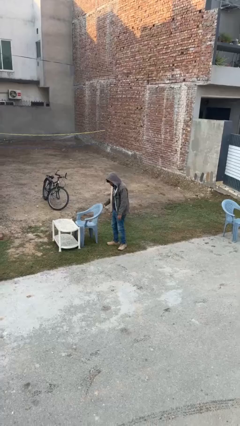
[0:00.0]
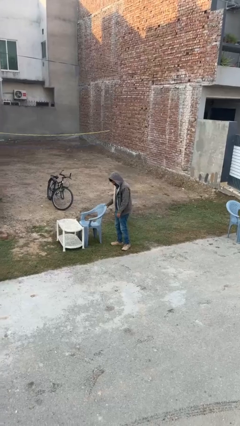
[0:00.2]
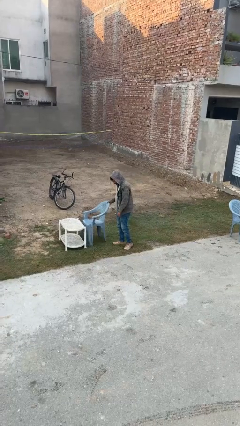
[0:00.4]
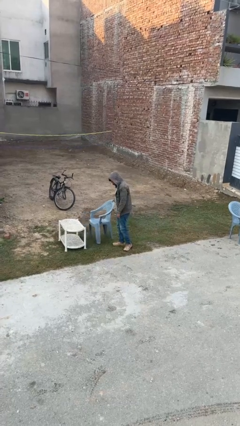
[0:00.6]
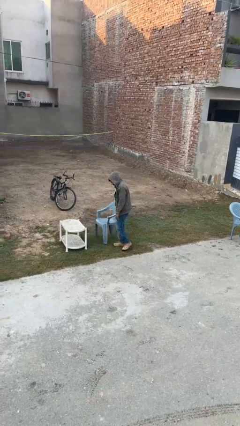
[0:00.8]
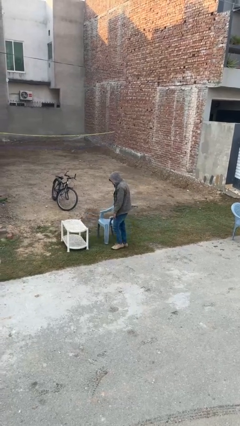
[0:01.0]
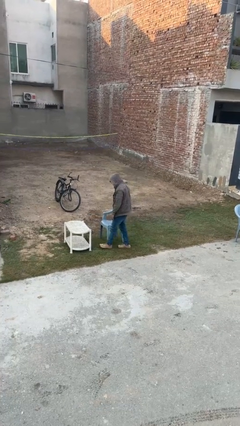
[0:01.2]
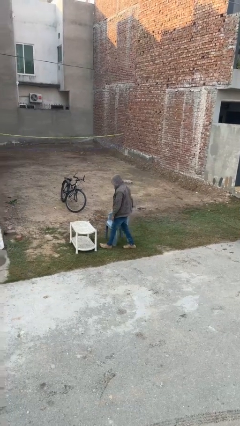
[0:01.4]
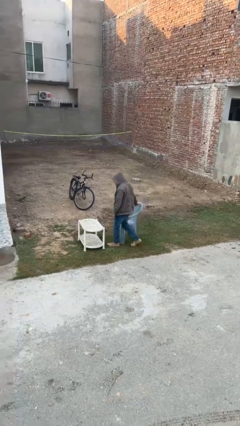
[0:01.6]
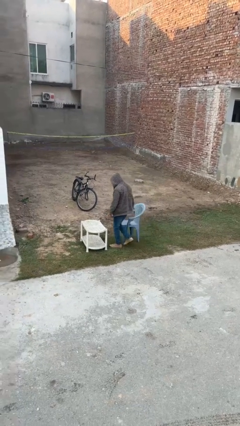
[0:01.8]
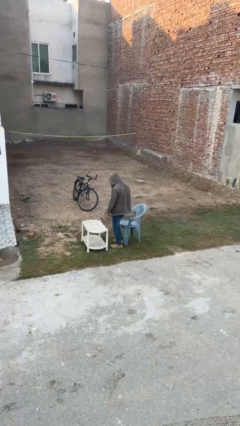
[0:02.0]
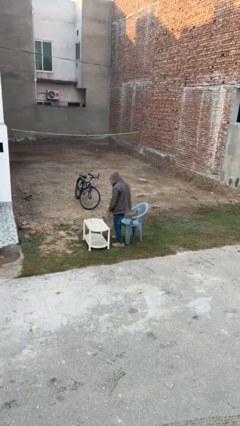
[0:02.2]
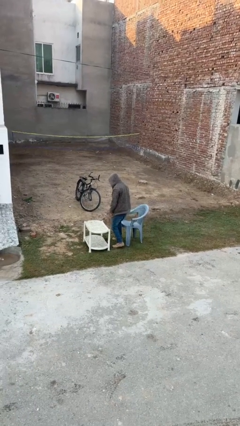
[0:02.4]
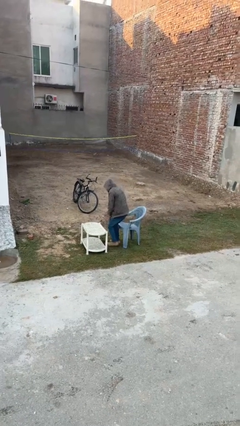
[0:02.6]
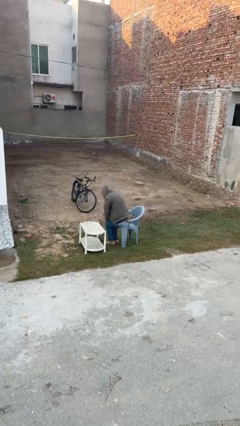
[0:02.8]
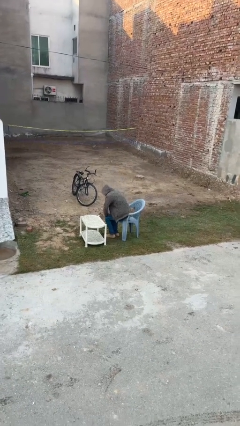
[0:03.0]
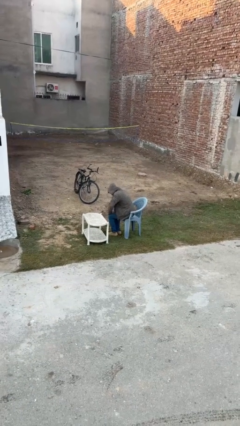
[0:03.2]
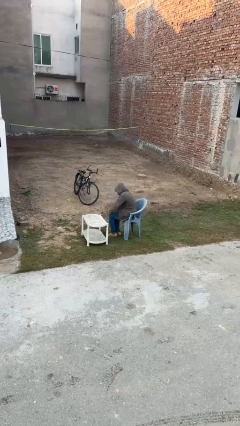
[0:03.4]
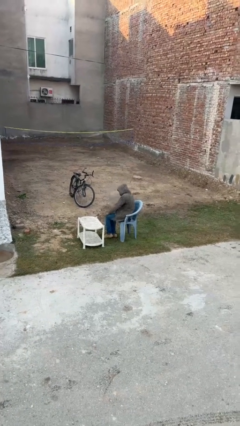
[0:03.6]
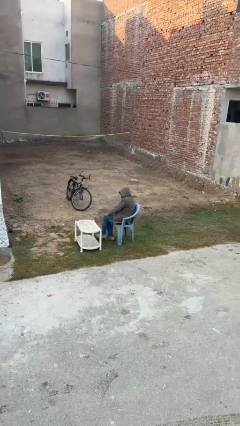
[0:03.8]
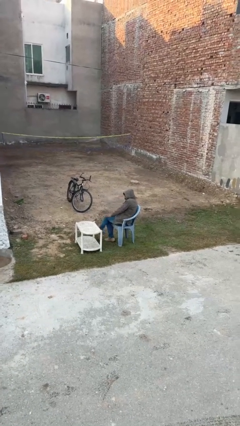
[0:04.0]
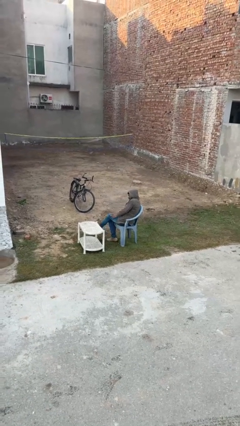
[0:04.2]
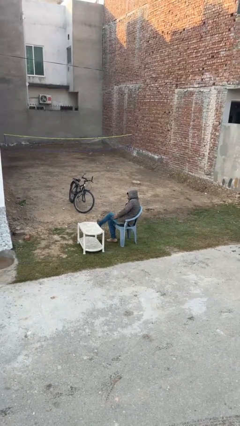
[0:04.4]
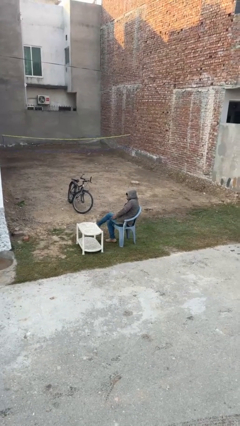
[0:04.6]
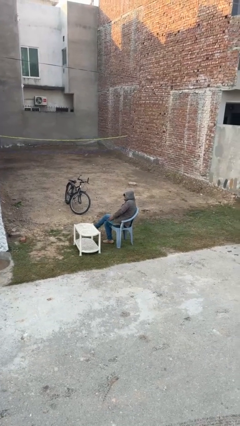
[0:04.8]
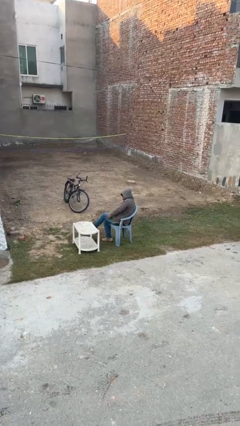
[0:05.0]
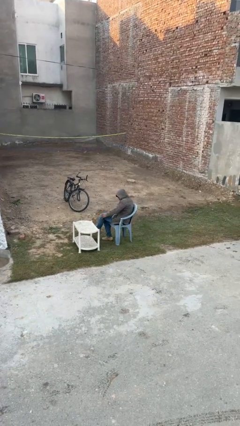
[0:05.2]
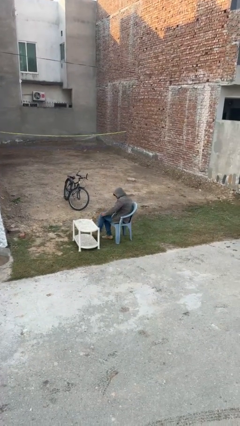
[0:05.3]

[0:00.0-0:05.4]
person sits down

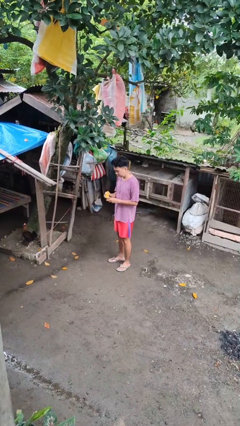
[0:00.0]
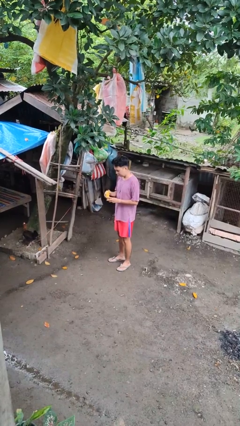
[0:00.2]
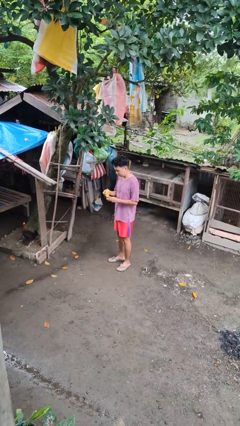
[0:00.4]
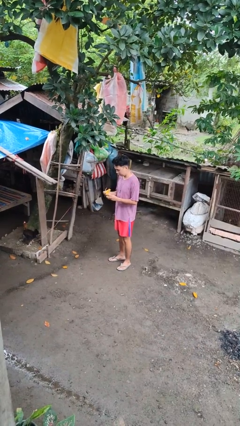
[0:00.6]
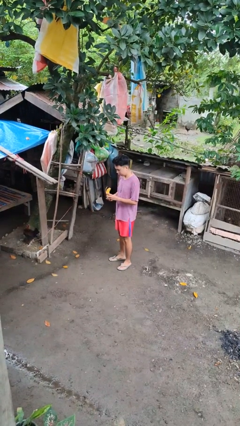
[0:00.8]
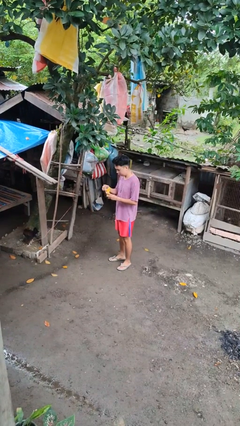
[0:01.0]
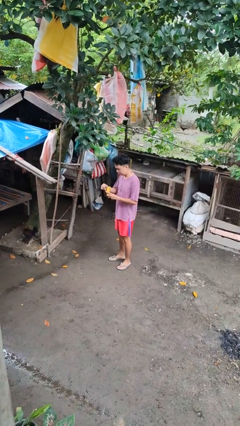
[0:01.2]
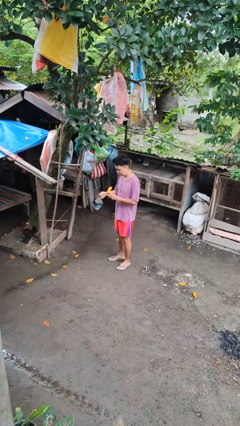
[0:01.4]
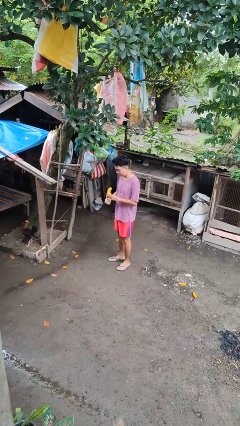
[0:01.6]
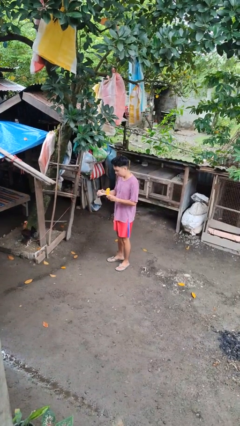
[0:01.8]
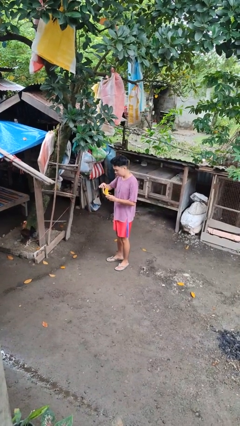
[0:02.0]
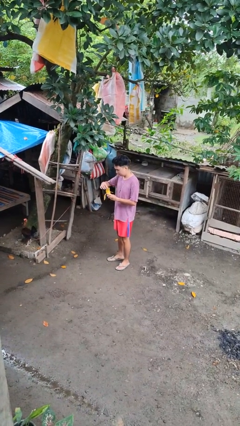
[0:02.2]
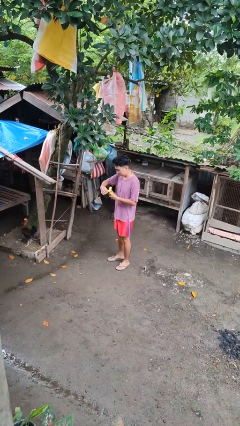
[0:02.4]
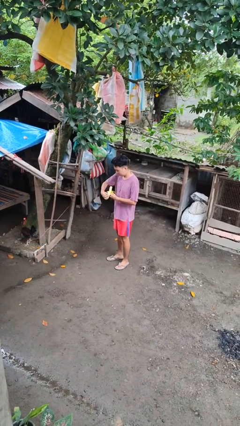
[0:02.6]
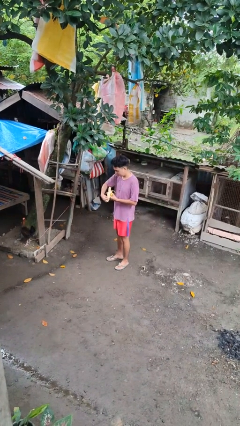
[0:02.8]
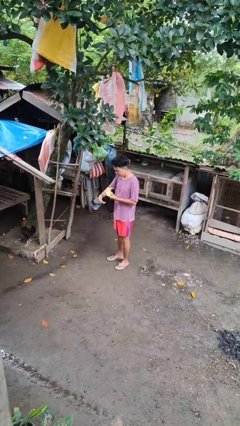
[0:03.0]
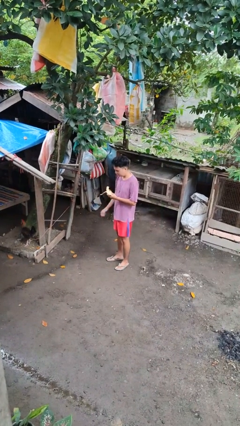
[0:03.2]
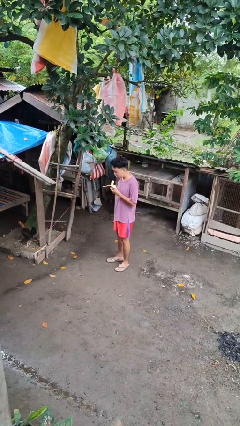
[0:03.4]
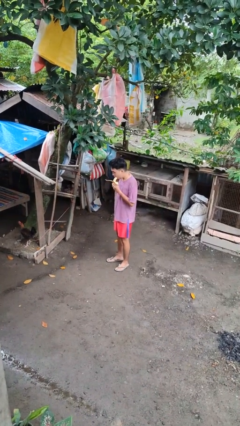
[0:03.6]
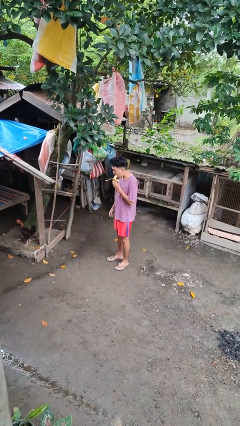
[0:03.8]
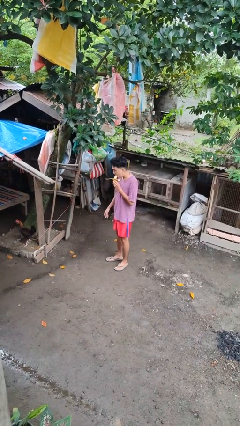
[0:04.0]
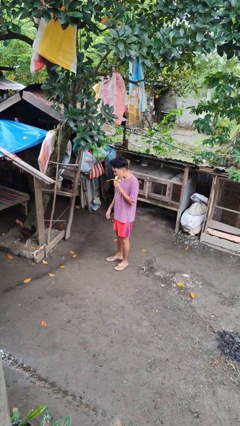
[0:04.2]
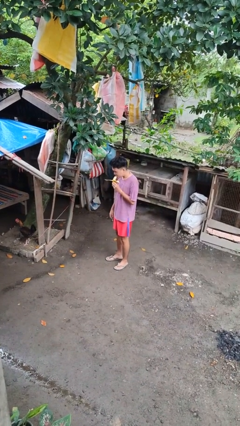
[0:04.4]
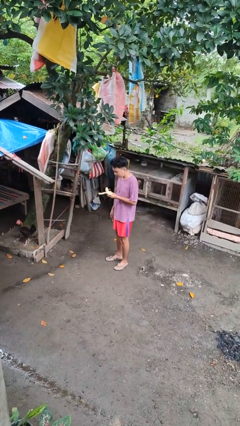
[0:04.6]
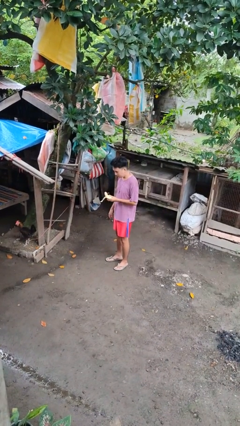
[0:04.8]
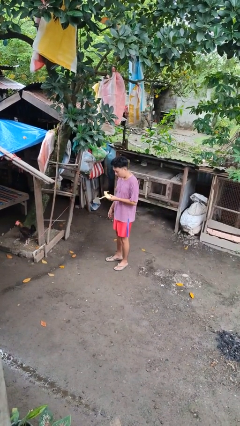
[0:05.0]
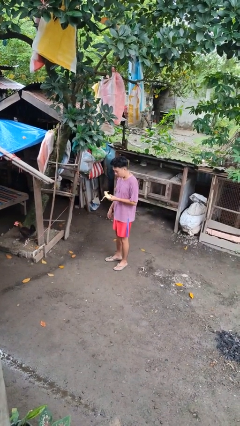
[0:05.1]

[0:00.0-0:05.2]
person eats banana

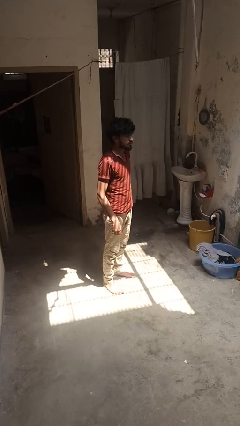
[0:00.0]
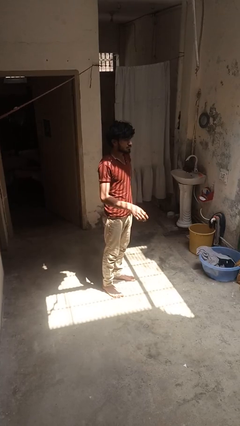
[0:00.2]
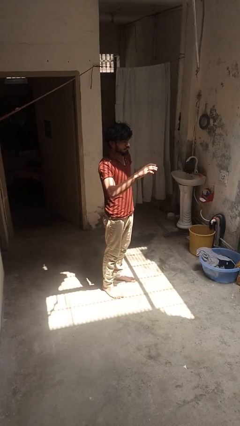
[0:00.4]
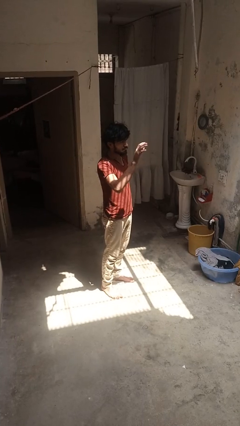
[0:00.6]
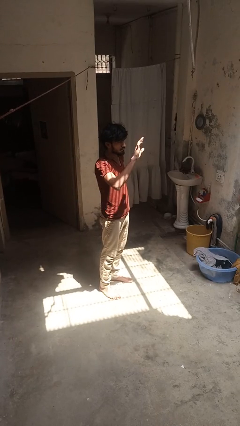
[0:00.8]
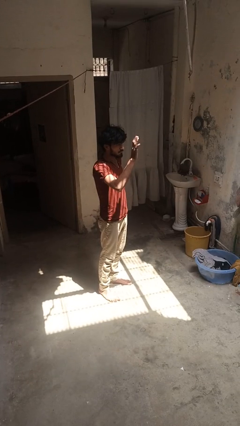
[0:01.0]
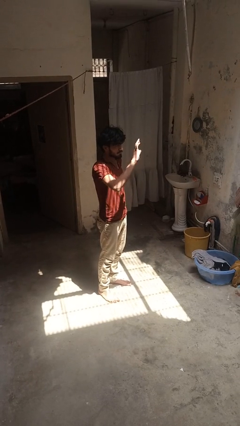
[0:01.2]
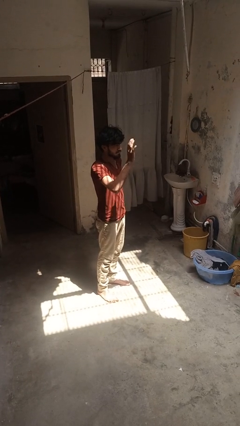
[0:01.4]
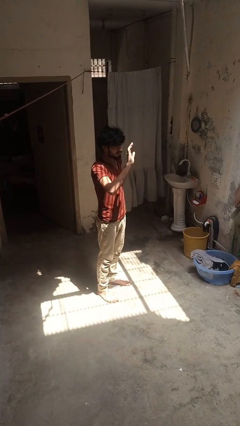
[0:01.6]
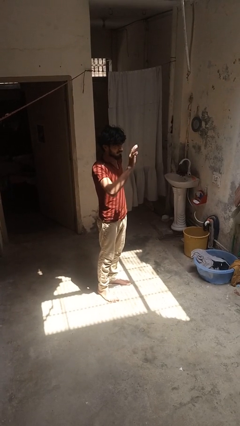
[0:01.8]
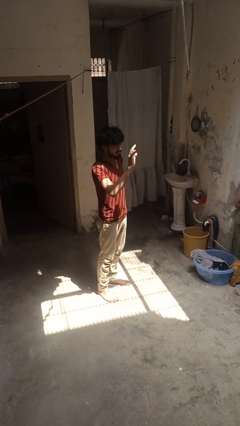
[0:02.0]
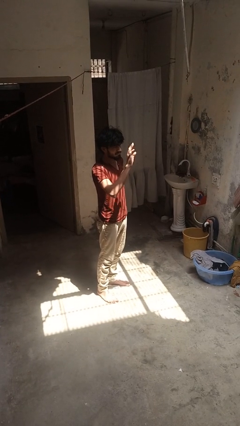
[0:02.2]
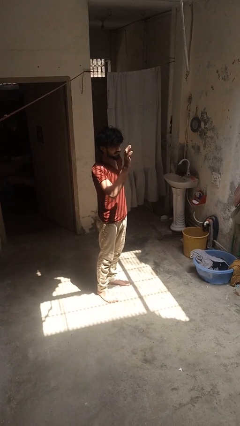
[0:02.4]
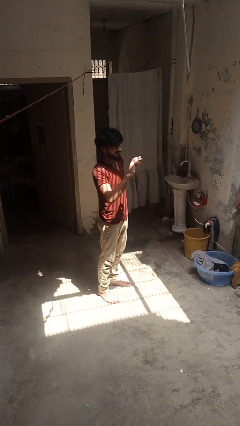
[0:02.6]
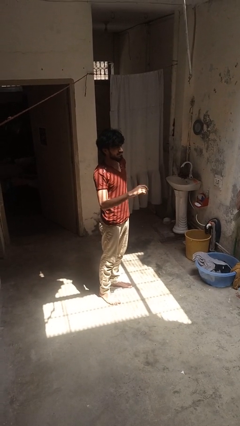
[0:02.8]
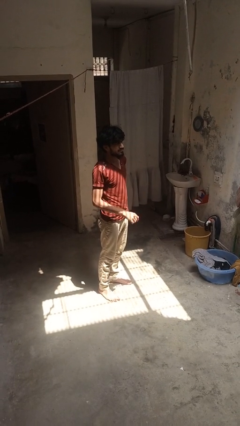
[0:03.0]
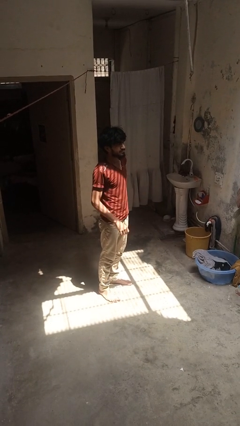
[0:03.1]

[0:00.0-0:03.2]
person waves at person

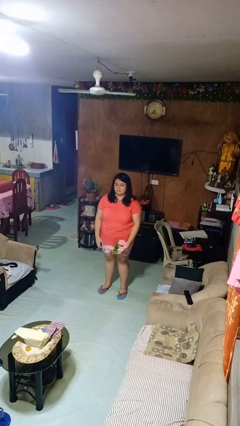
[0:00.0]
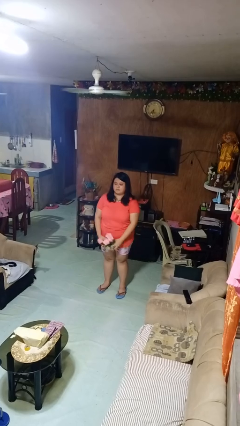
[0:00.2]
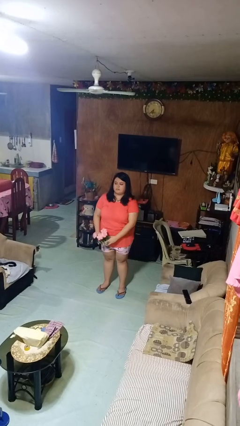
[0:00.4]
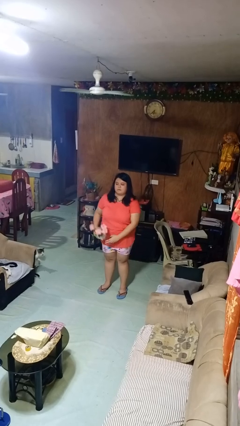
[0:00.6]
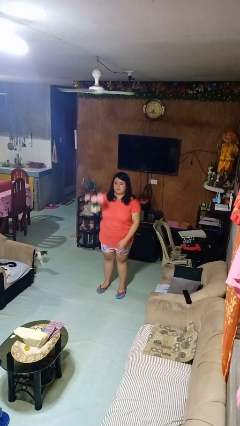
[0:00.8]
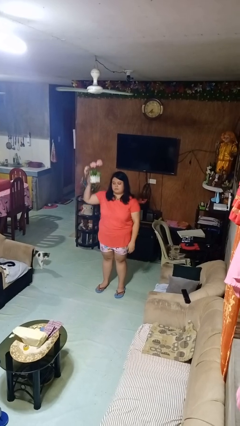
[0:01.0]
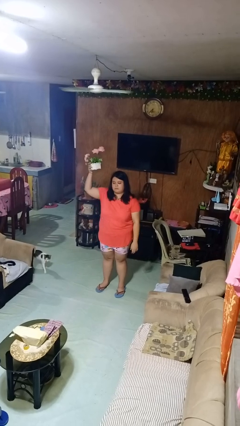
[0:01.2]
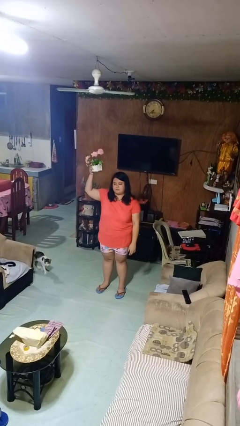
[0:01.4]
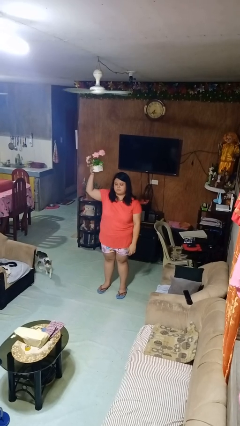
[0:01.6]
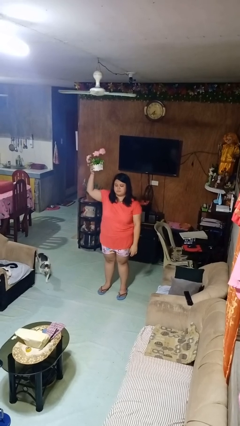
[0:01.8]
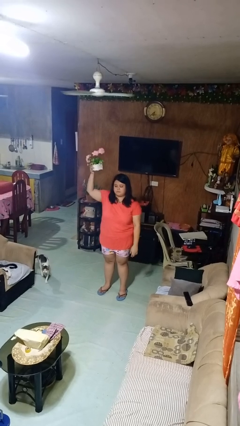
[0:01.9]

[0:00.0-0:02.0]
person holds object above head

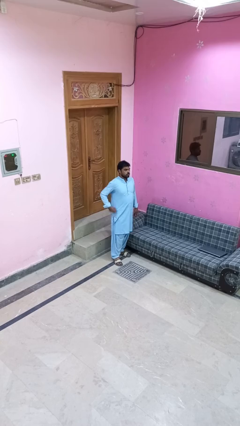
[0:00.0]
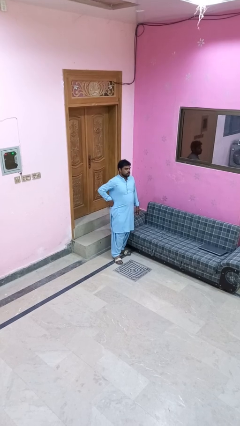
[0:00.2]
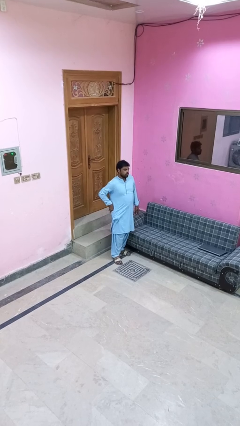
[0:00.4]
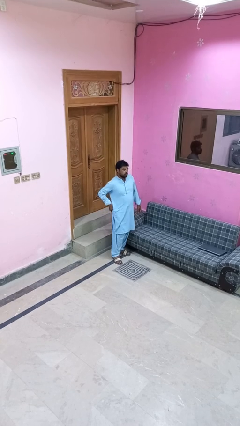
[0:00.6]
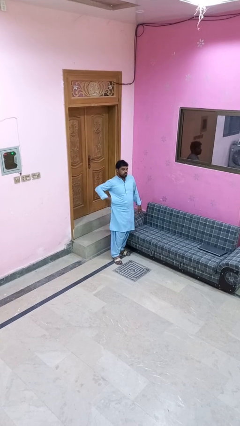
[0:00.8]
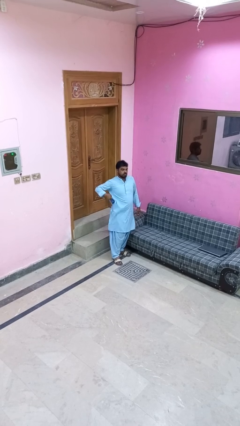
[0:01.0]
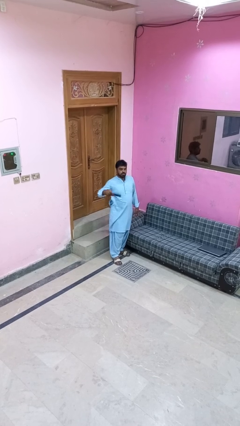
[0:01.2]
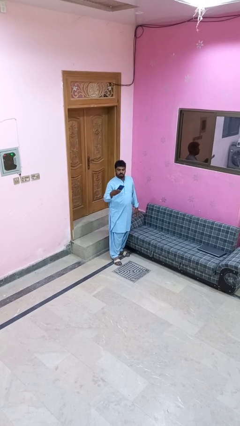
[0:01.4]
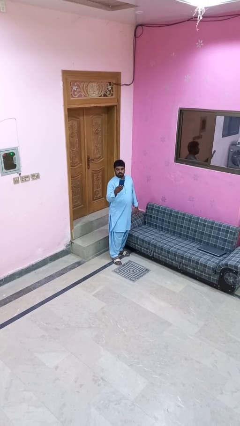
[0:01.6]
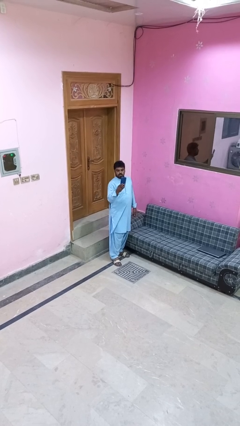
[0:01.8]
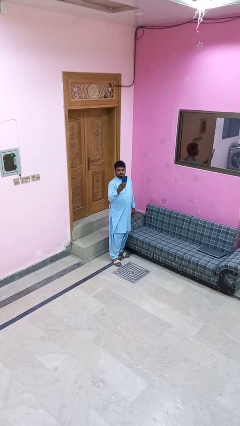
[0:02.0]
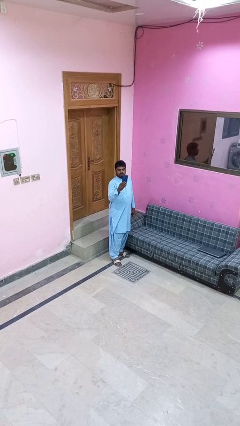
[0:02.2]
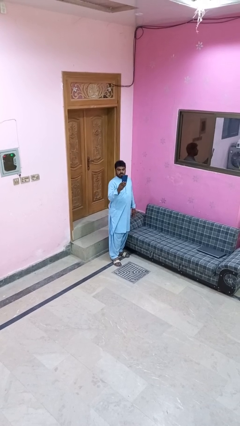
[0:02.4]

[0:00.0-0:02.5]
person takes phone from pocket
